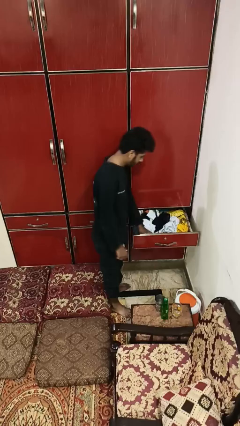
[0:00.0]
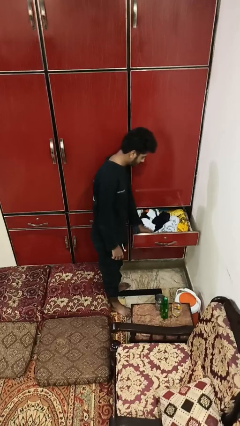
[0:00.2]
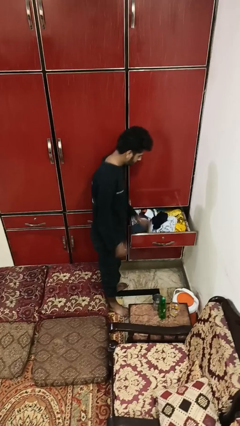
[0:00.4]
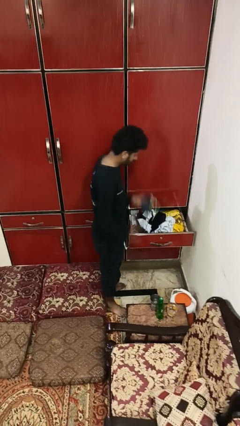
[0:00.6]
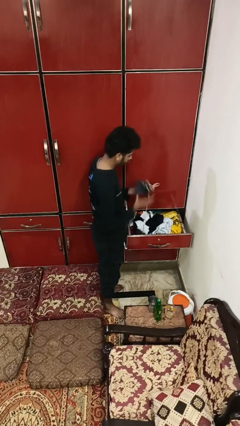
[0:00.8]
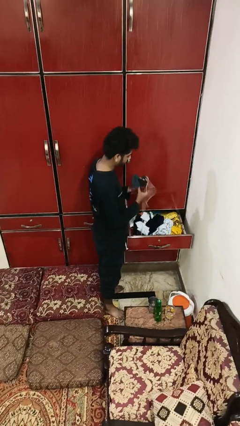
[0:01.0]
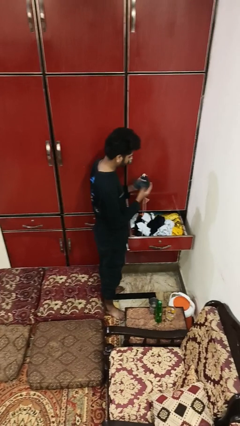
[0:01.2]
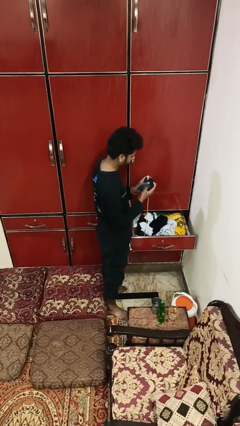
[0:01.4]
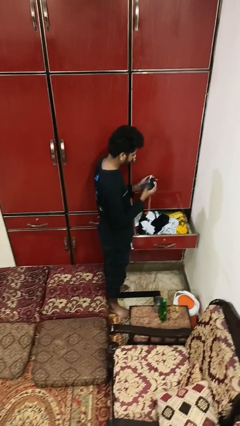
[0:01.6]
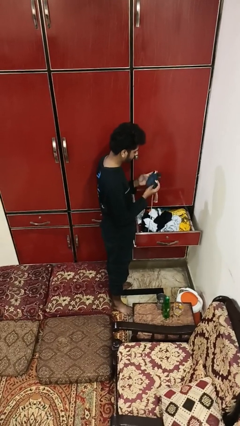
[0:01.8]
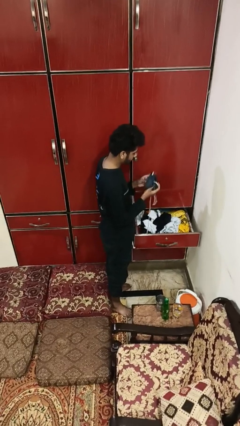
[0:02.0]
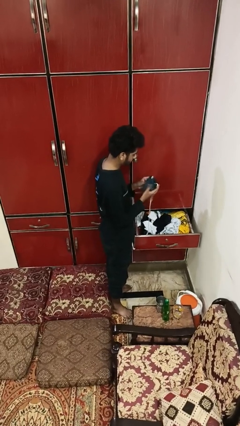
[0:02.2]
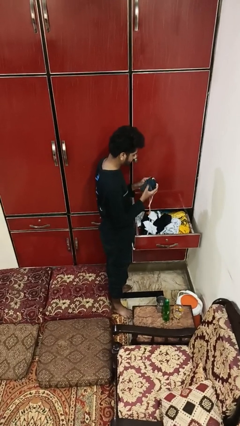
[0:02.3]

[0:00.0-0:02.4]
person takes clothes from dresser

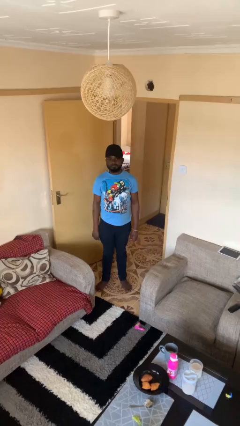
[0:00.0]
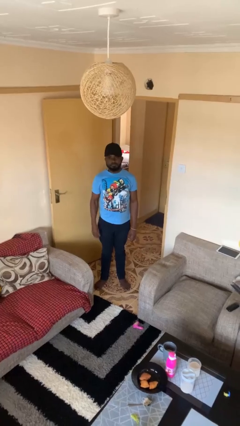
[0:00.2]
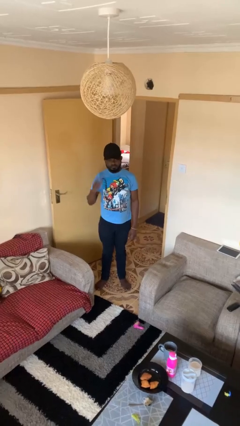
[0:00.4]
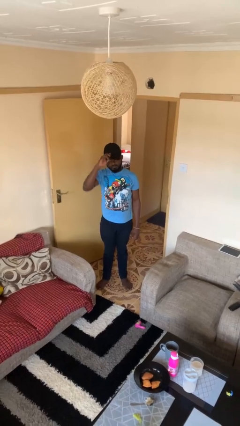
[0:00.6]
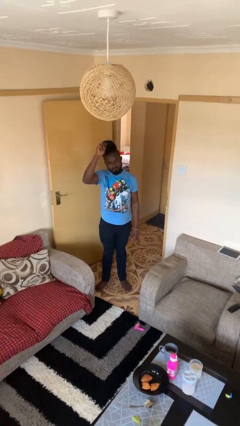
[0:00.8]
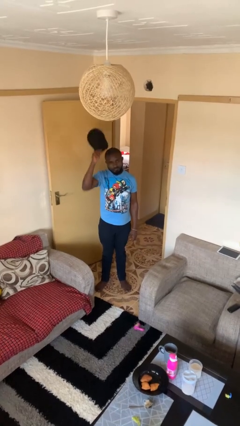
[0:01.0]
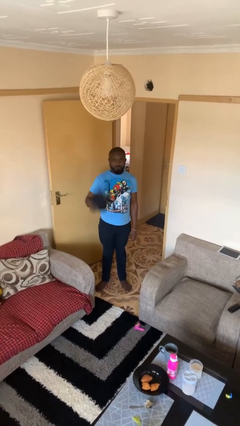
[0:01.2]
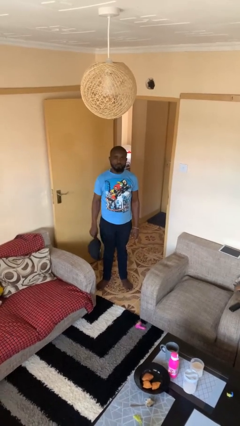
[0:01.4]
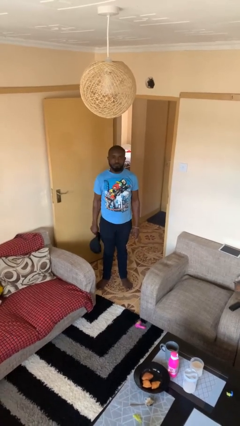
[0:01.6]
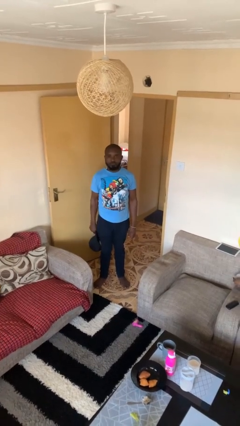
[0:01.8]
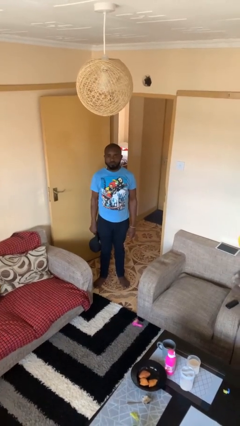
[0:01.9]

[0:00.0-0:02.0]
person takes off hat

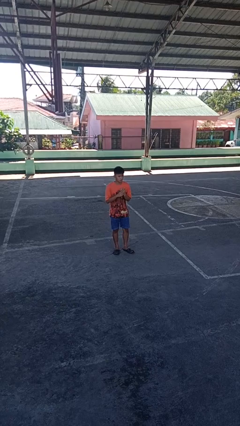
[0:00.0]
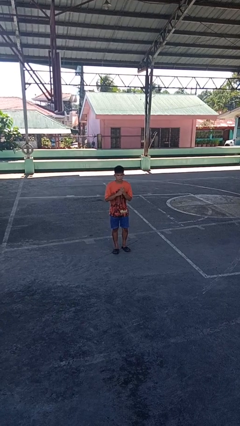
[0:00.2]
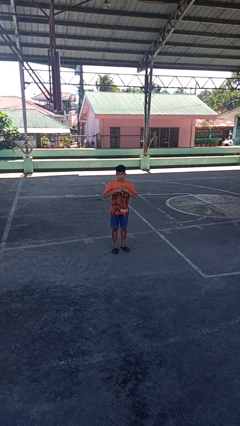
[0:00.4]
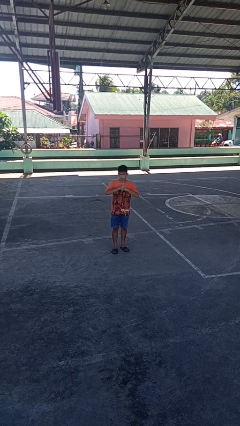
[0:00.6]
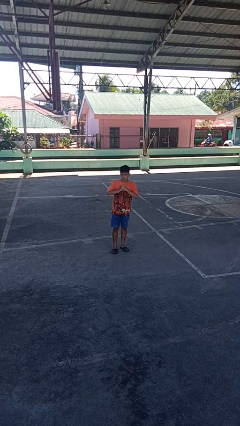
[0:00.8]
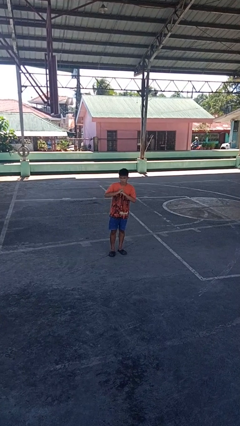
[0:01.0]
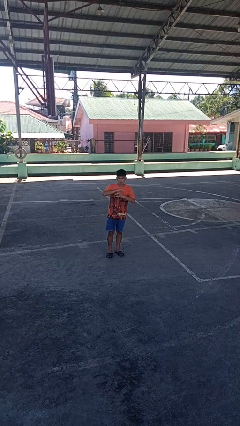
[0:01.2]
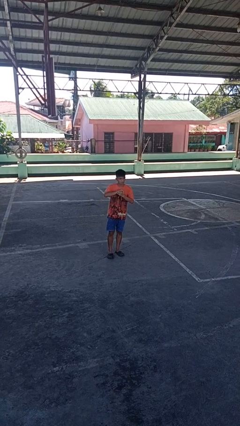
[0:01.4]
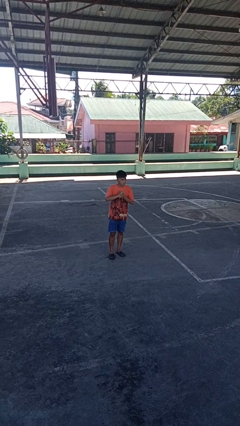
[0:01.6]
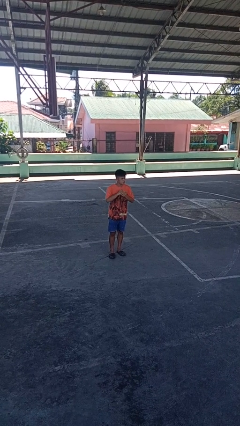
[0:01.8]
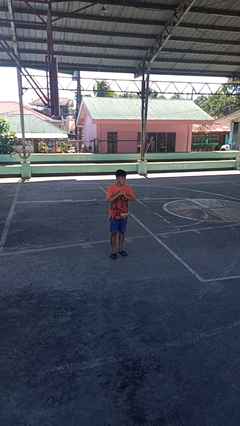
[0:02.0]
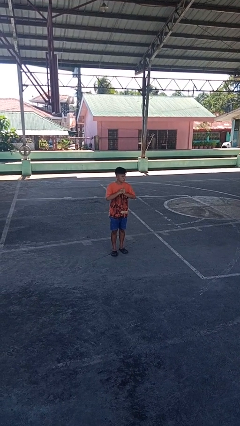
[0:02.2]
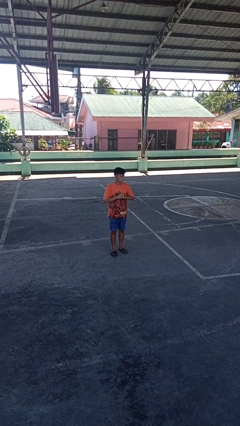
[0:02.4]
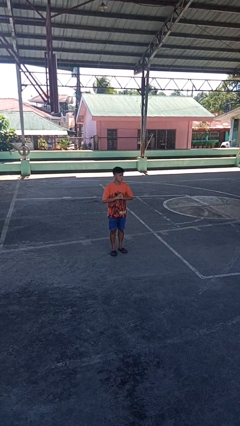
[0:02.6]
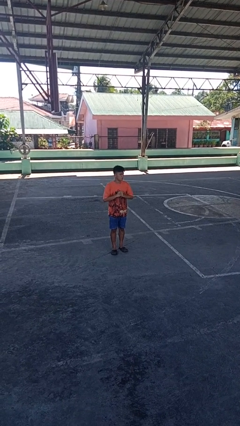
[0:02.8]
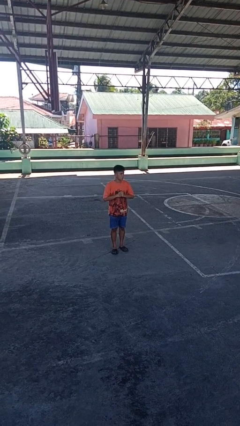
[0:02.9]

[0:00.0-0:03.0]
person cracks knuckles

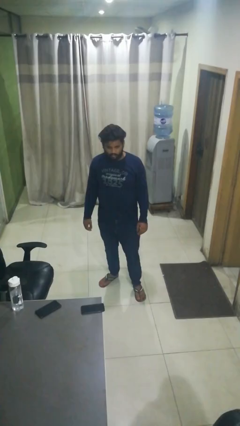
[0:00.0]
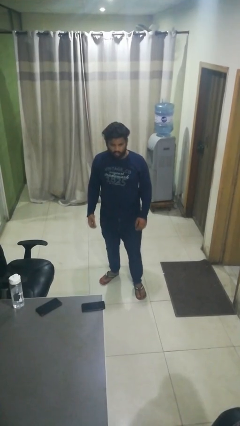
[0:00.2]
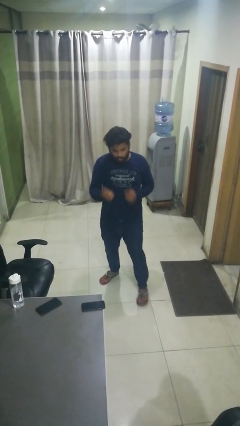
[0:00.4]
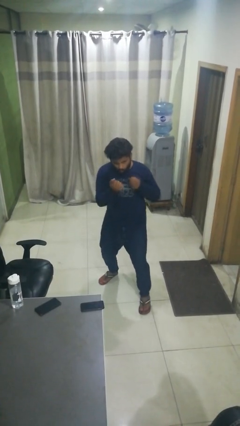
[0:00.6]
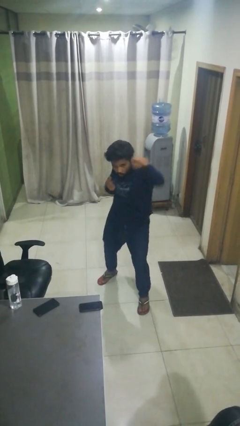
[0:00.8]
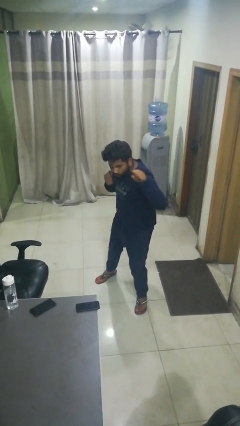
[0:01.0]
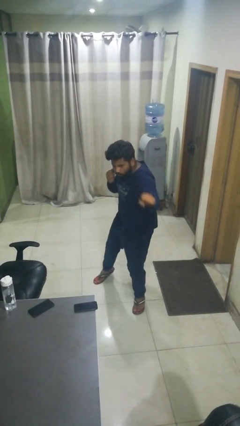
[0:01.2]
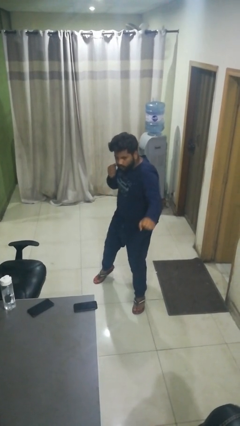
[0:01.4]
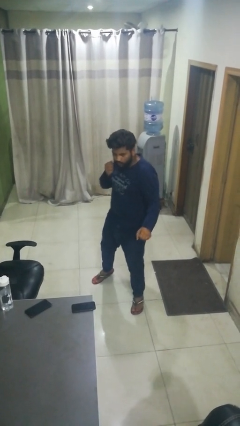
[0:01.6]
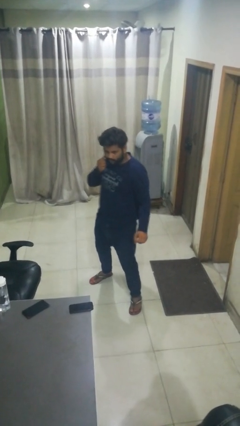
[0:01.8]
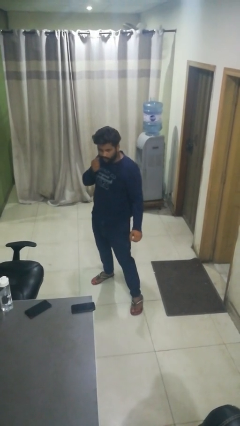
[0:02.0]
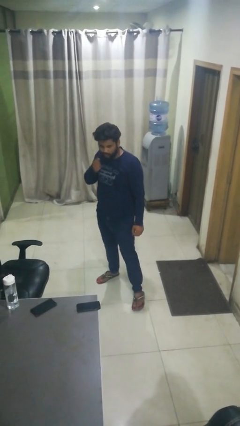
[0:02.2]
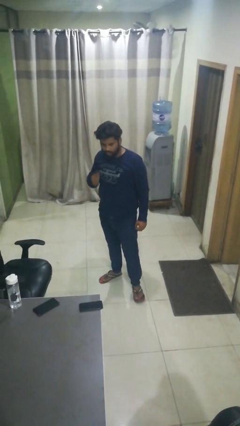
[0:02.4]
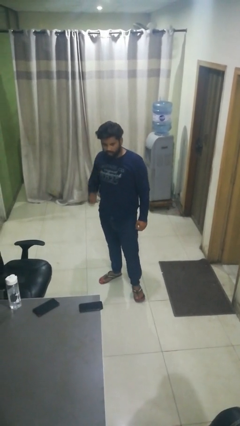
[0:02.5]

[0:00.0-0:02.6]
person punches

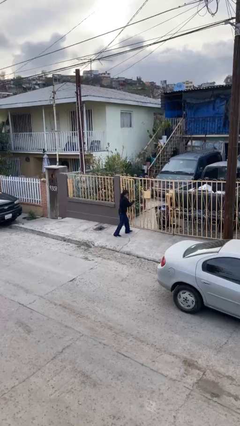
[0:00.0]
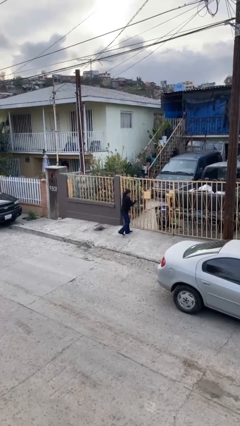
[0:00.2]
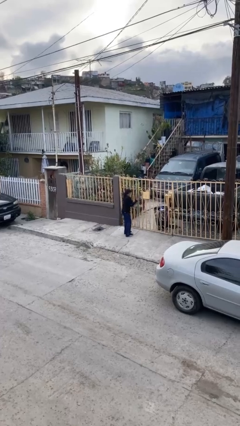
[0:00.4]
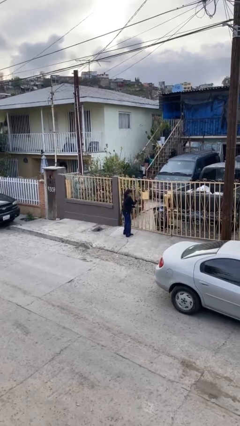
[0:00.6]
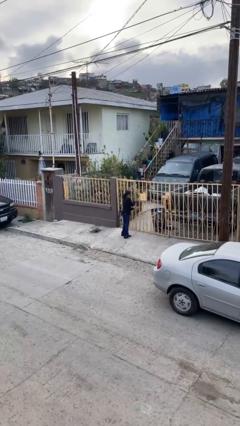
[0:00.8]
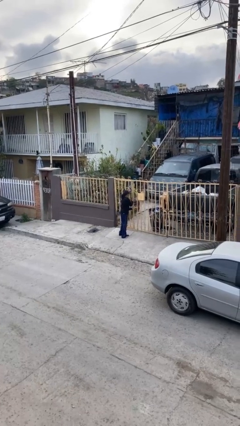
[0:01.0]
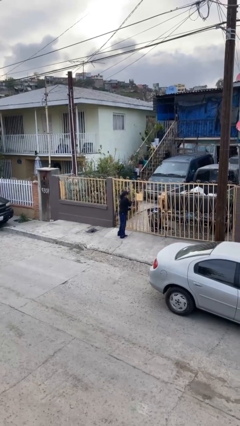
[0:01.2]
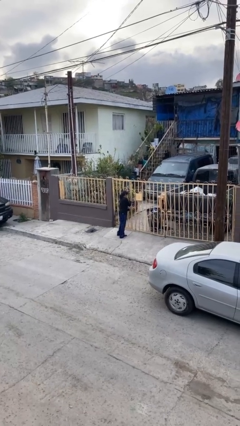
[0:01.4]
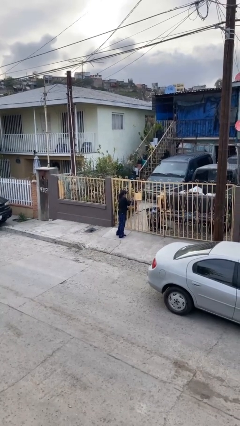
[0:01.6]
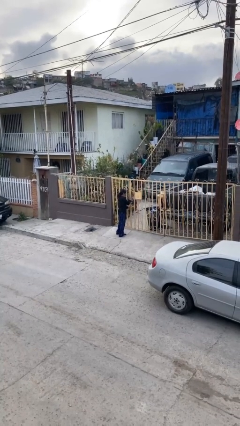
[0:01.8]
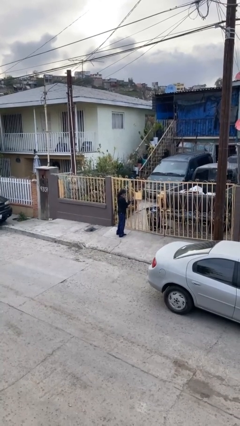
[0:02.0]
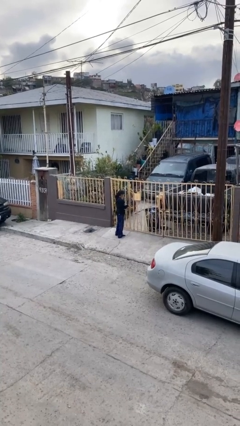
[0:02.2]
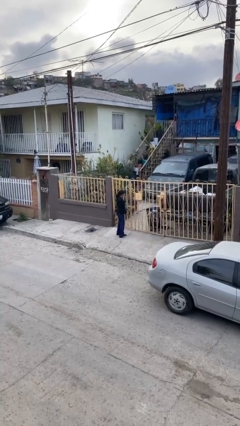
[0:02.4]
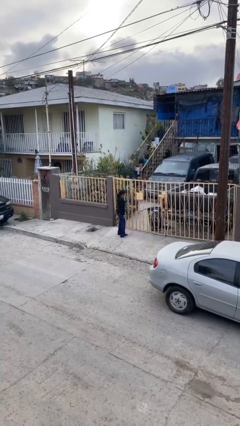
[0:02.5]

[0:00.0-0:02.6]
person closes facility door

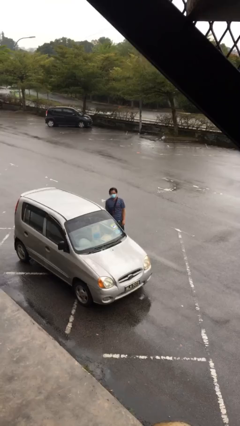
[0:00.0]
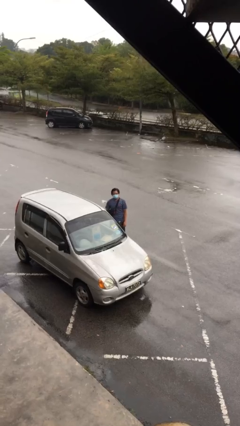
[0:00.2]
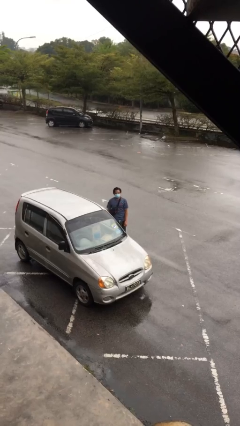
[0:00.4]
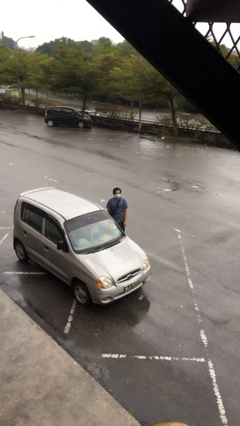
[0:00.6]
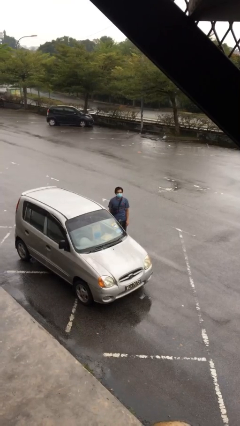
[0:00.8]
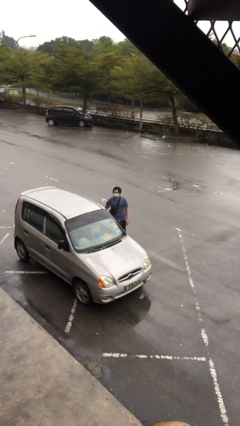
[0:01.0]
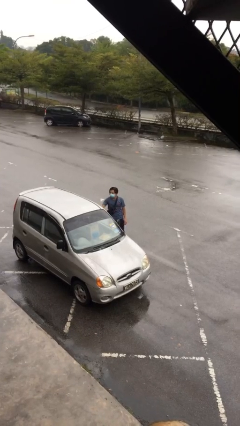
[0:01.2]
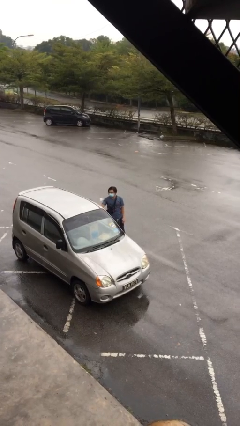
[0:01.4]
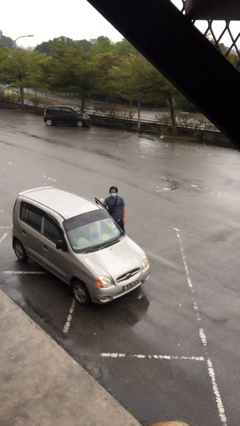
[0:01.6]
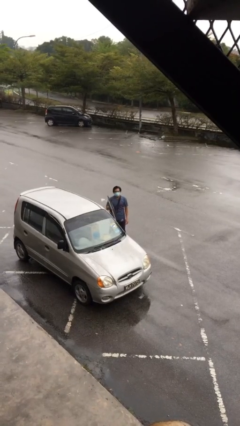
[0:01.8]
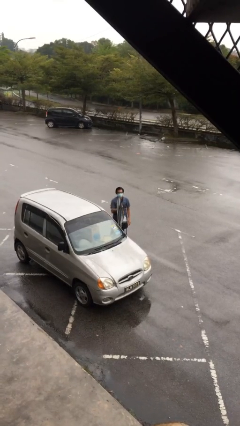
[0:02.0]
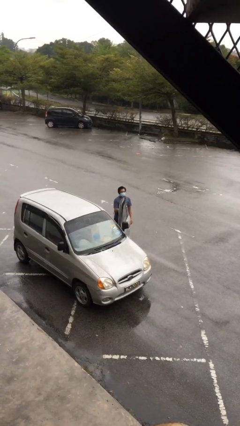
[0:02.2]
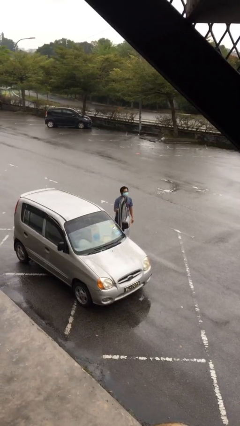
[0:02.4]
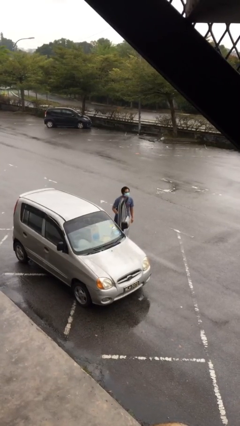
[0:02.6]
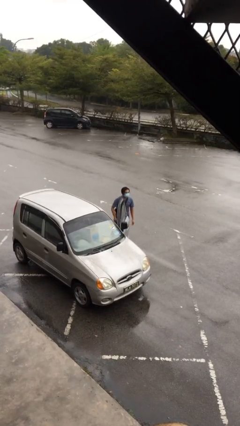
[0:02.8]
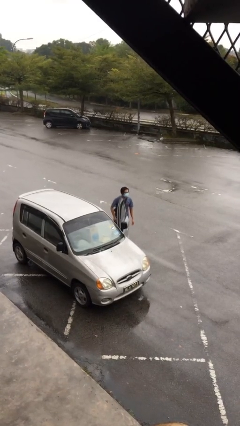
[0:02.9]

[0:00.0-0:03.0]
person opens car door

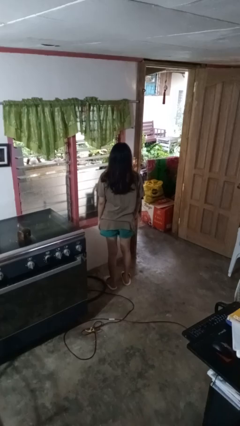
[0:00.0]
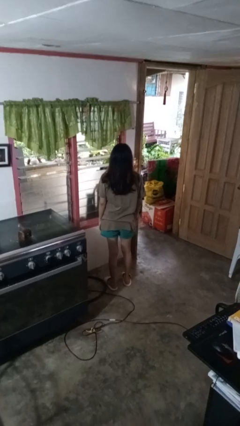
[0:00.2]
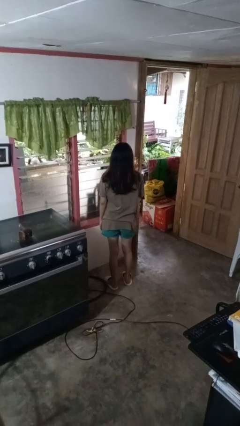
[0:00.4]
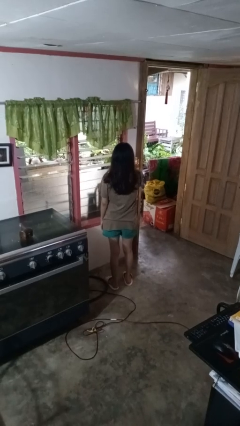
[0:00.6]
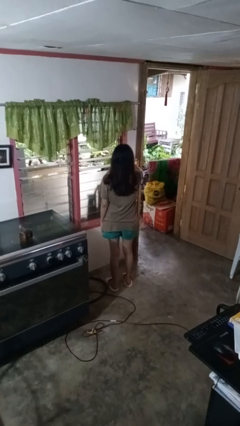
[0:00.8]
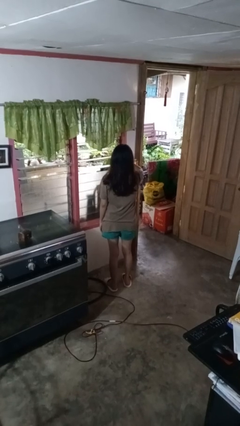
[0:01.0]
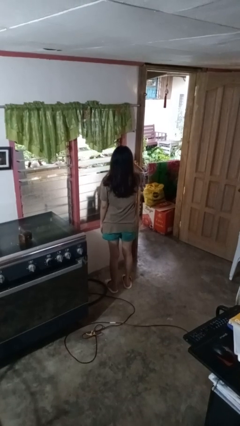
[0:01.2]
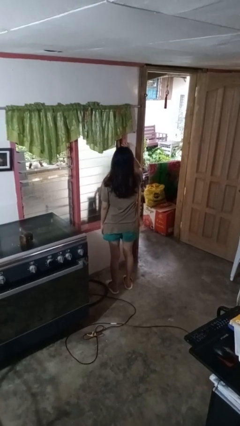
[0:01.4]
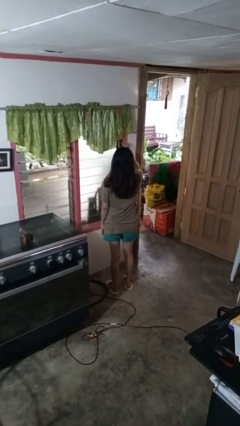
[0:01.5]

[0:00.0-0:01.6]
person closes home window

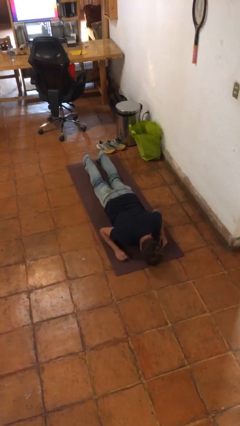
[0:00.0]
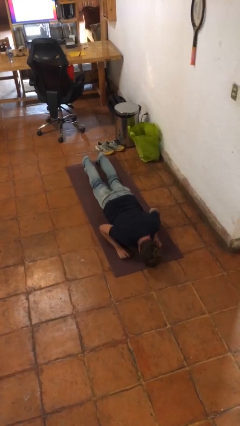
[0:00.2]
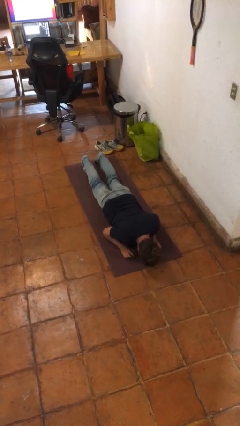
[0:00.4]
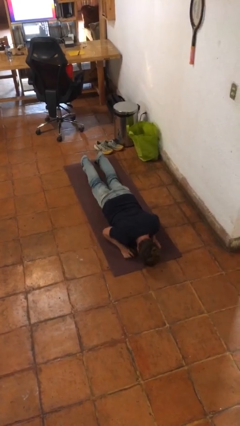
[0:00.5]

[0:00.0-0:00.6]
person exercises with pushup
